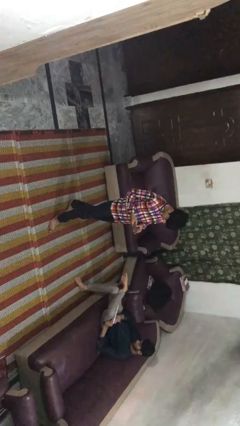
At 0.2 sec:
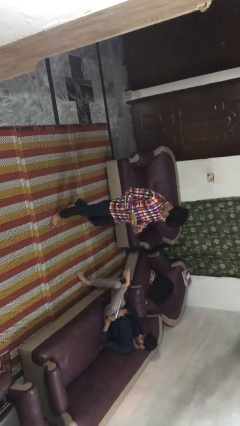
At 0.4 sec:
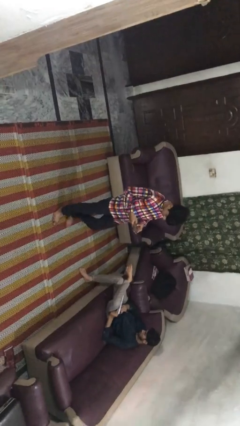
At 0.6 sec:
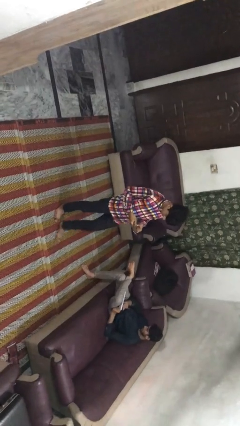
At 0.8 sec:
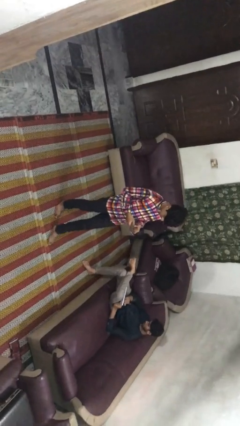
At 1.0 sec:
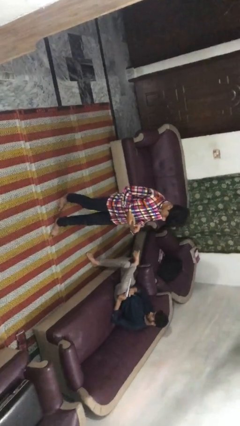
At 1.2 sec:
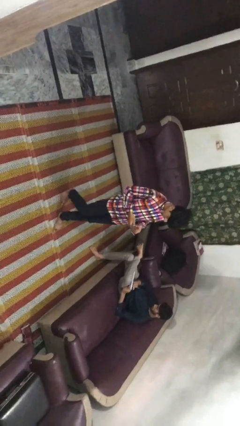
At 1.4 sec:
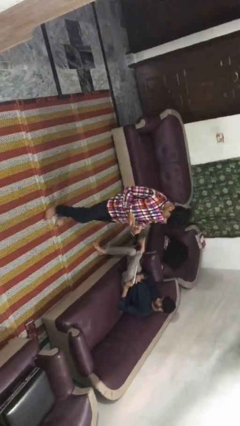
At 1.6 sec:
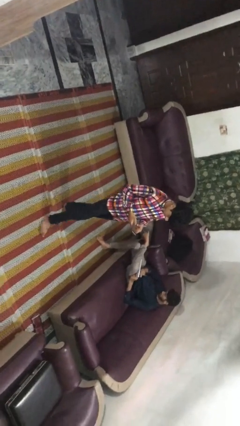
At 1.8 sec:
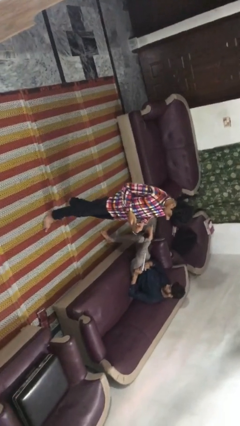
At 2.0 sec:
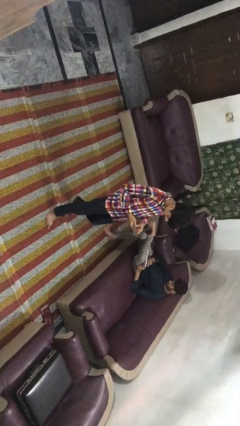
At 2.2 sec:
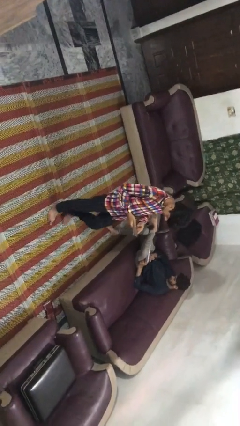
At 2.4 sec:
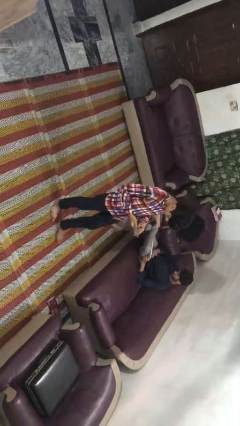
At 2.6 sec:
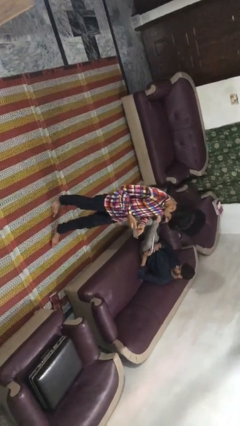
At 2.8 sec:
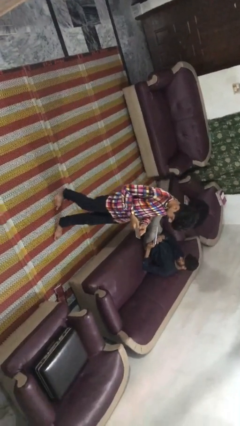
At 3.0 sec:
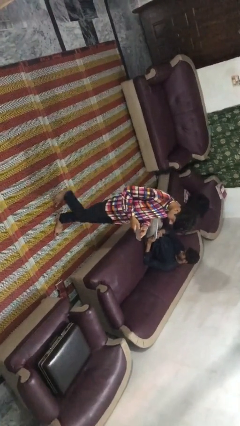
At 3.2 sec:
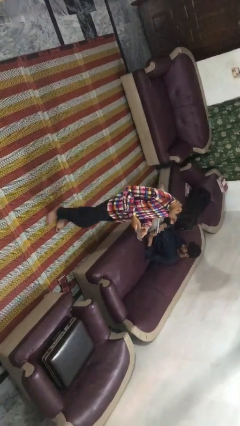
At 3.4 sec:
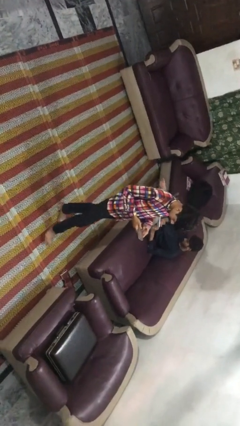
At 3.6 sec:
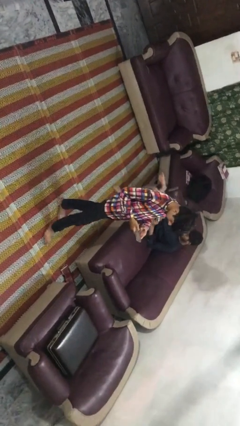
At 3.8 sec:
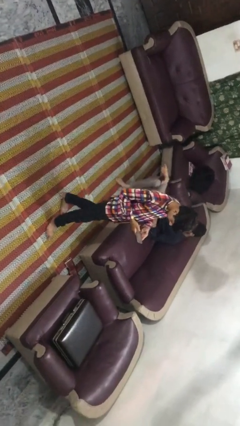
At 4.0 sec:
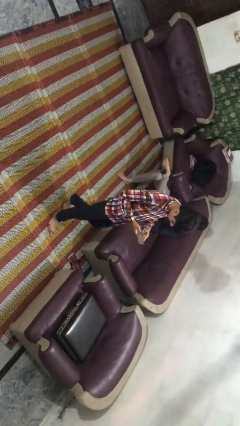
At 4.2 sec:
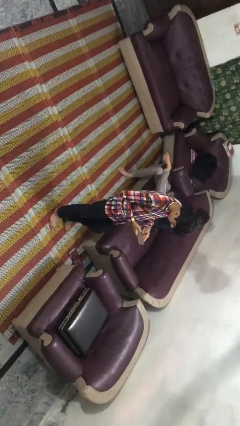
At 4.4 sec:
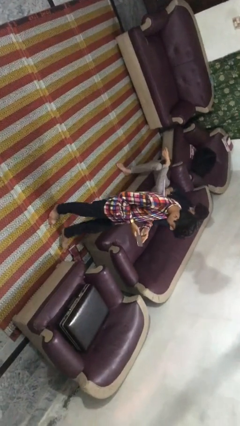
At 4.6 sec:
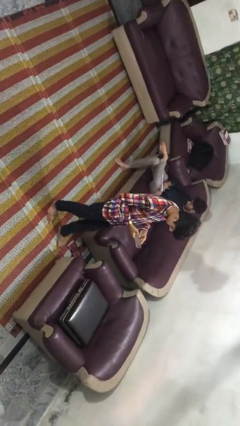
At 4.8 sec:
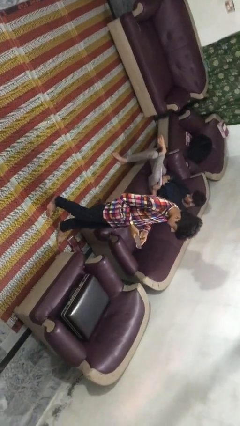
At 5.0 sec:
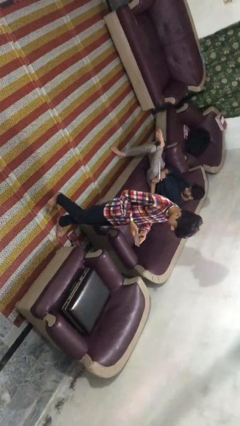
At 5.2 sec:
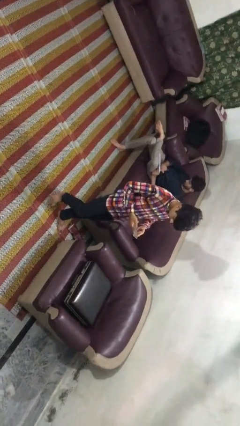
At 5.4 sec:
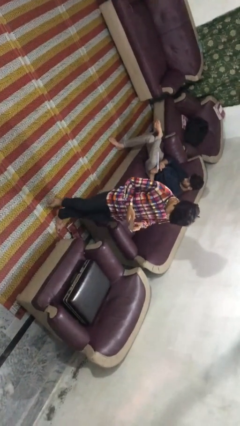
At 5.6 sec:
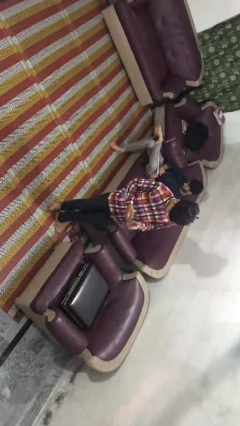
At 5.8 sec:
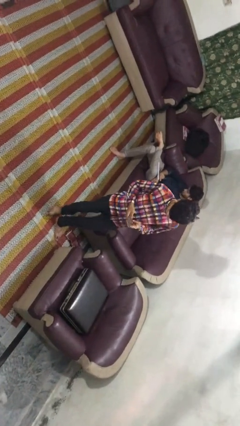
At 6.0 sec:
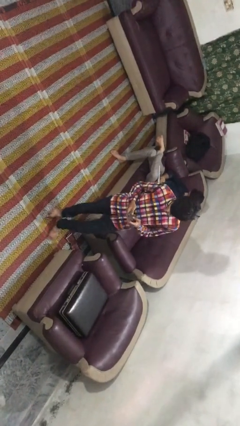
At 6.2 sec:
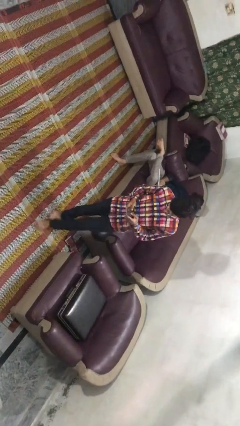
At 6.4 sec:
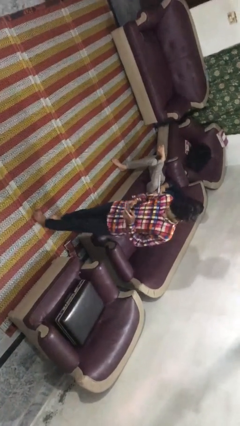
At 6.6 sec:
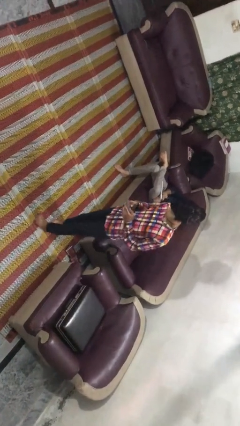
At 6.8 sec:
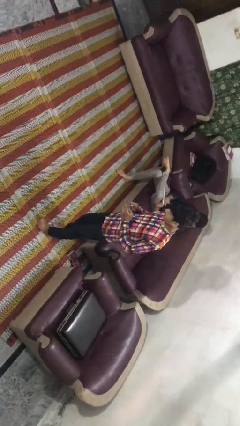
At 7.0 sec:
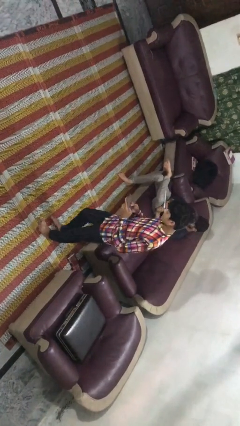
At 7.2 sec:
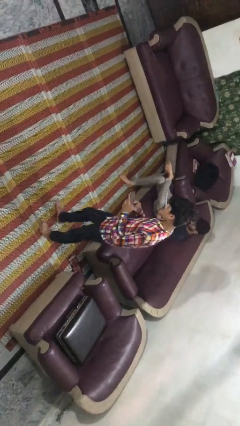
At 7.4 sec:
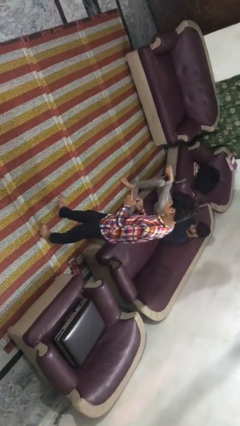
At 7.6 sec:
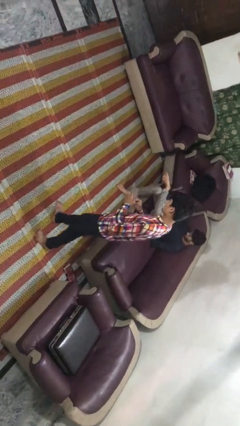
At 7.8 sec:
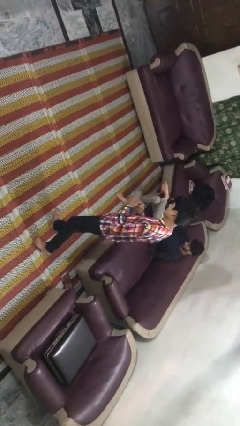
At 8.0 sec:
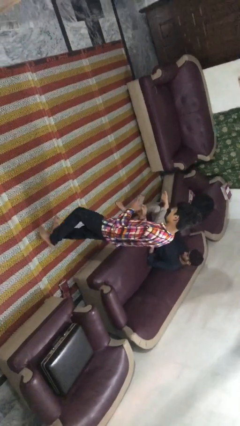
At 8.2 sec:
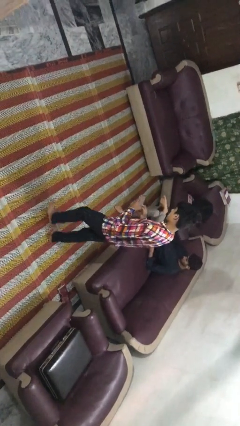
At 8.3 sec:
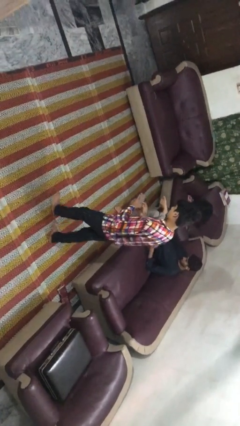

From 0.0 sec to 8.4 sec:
person texts on phone

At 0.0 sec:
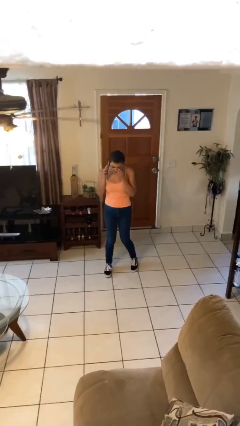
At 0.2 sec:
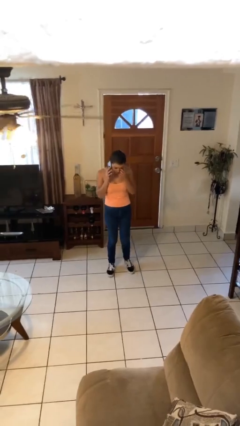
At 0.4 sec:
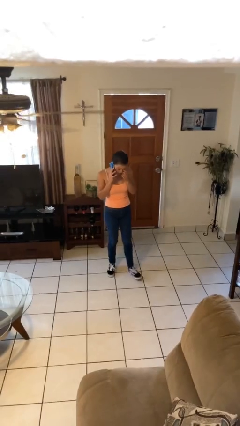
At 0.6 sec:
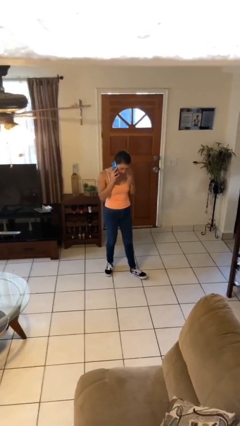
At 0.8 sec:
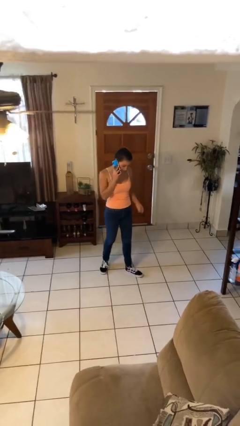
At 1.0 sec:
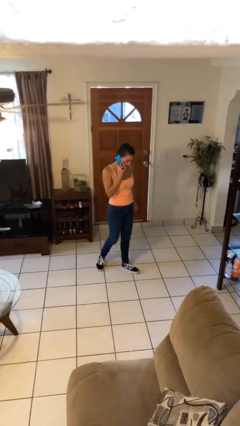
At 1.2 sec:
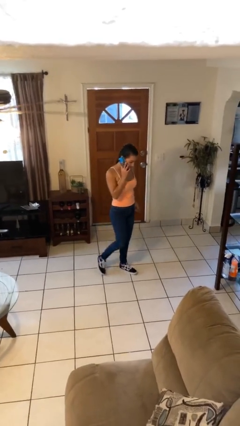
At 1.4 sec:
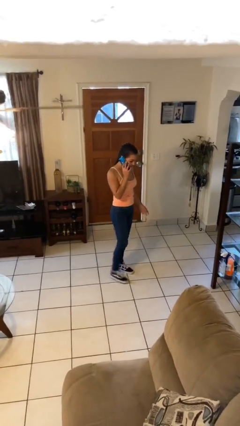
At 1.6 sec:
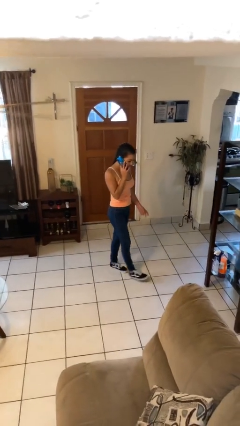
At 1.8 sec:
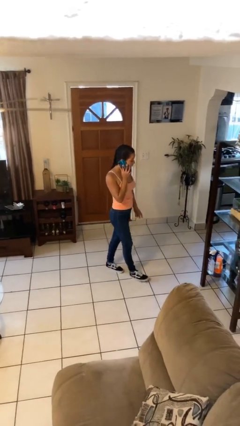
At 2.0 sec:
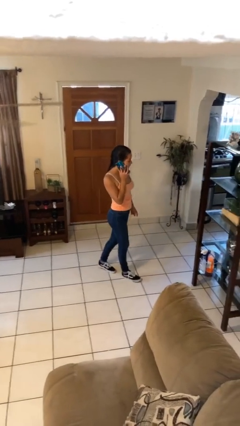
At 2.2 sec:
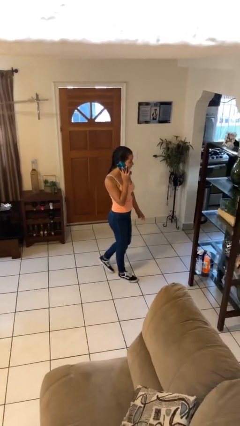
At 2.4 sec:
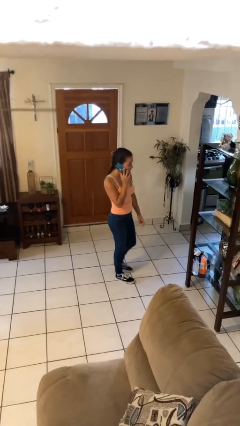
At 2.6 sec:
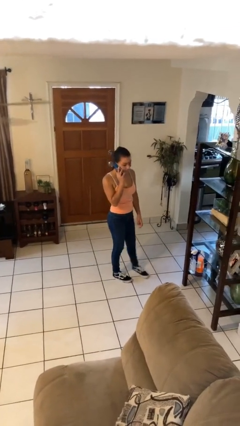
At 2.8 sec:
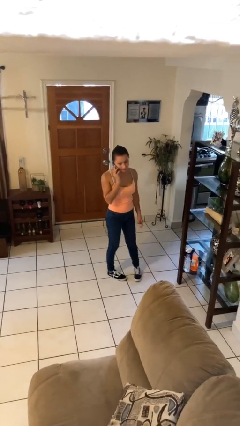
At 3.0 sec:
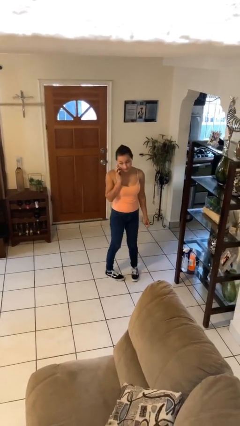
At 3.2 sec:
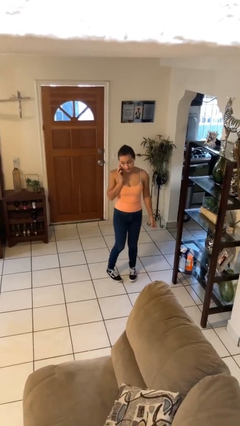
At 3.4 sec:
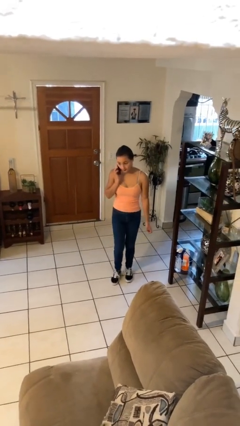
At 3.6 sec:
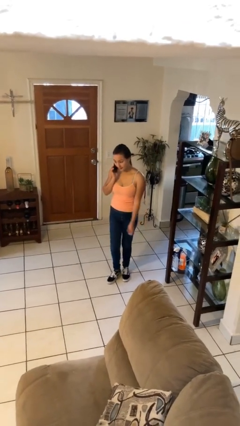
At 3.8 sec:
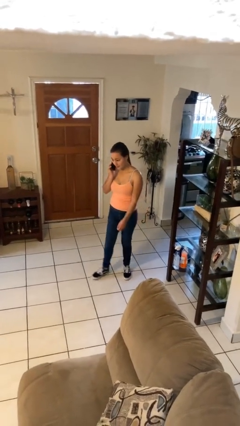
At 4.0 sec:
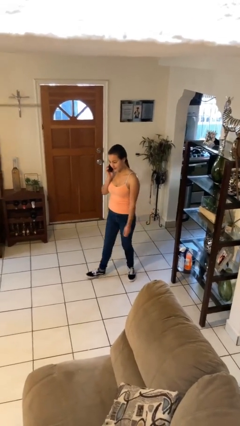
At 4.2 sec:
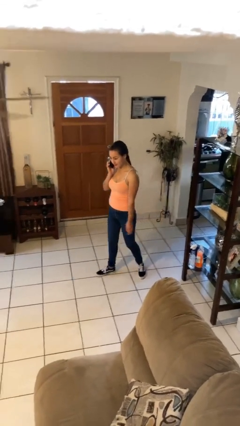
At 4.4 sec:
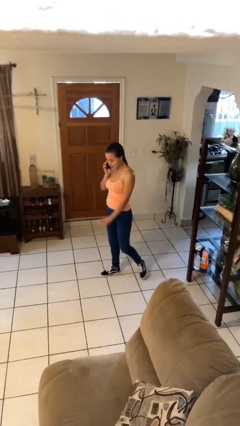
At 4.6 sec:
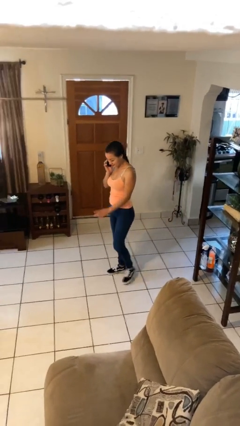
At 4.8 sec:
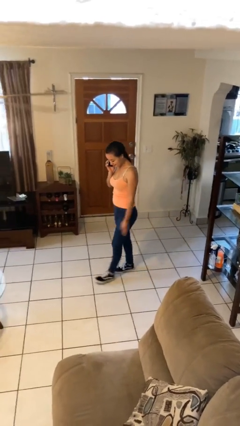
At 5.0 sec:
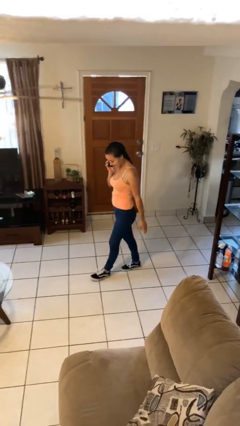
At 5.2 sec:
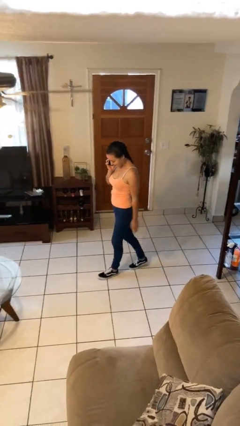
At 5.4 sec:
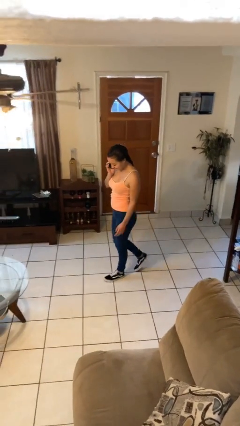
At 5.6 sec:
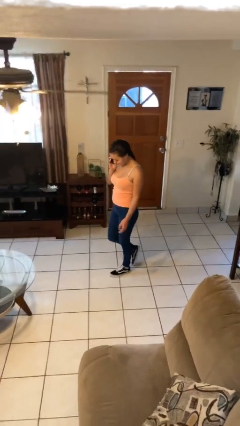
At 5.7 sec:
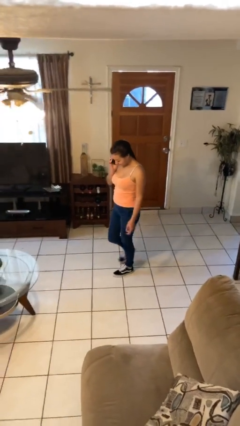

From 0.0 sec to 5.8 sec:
person talks on phone

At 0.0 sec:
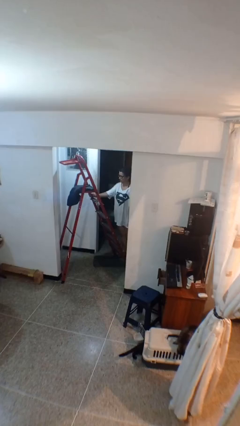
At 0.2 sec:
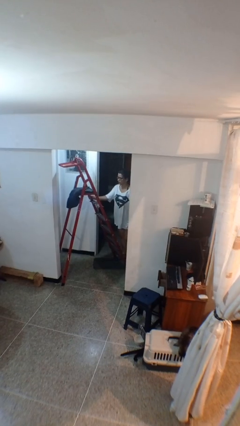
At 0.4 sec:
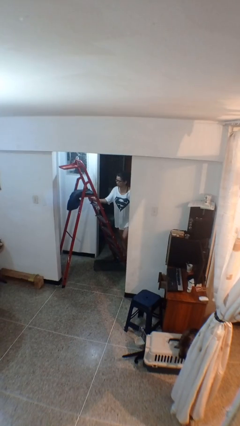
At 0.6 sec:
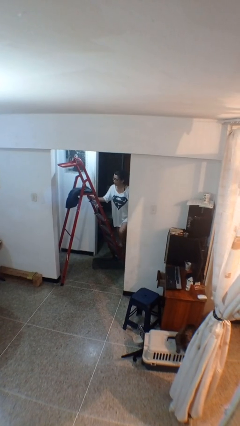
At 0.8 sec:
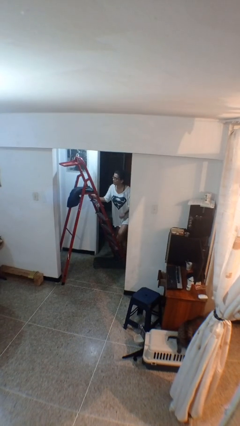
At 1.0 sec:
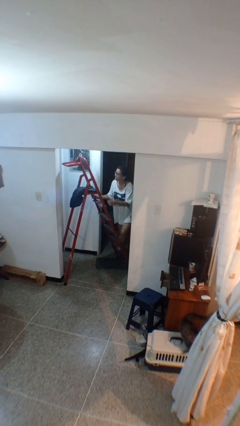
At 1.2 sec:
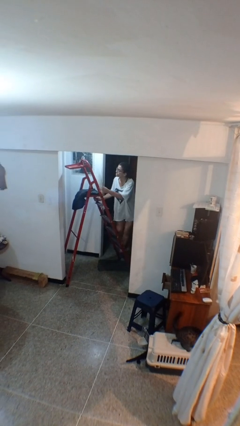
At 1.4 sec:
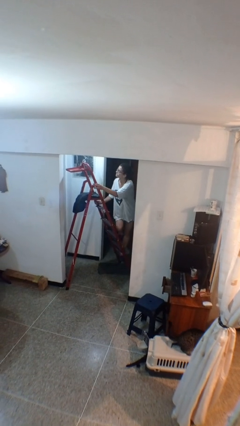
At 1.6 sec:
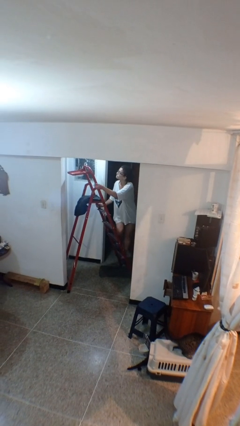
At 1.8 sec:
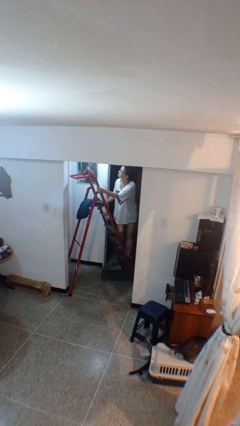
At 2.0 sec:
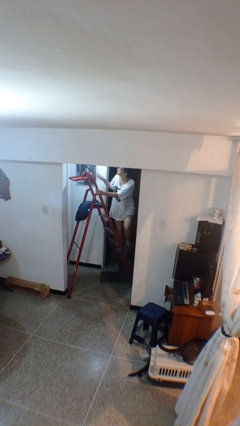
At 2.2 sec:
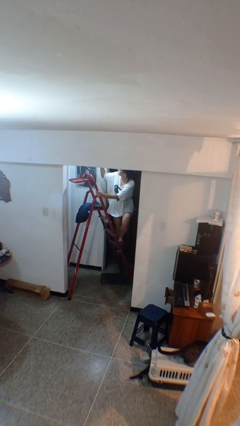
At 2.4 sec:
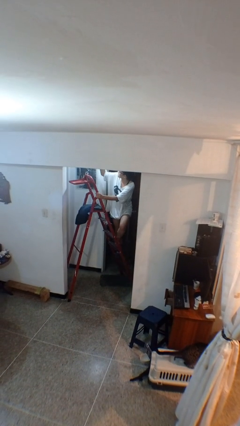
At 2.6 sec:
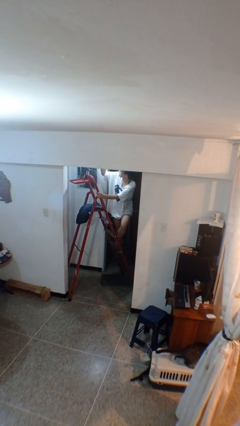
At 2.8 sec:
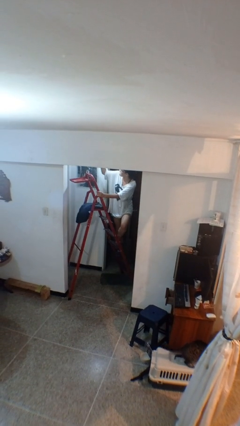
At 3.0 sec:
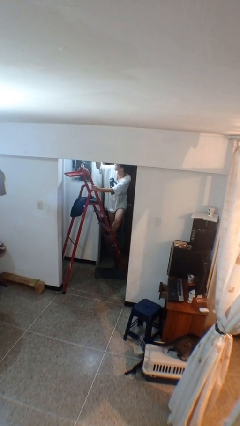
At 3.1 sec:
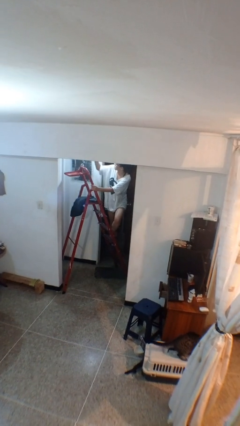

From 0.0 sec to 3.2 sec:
person climbs up ladder

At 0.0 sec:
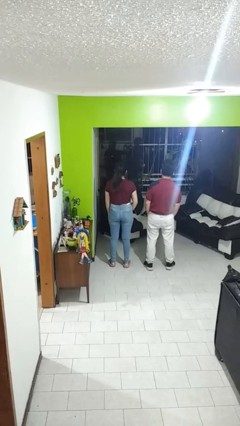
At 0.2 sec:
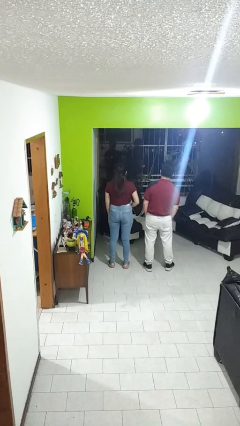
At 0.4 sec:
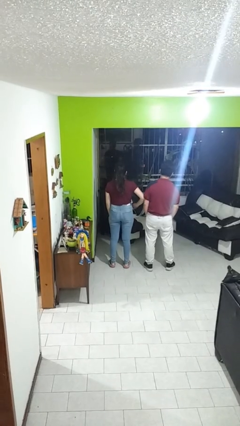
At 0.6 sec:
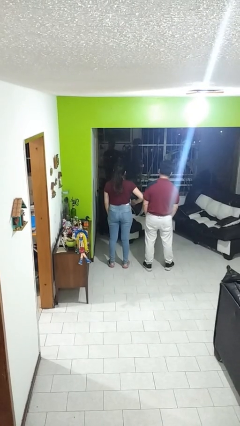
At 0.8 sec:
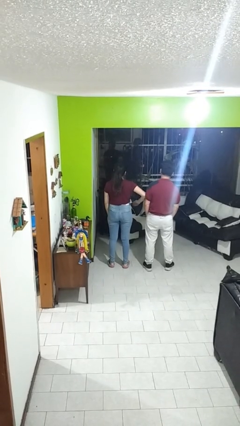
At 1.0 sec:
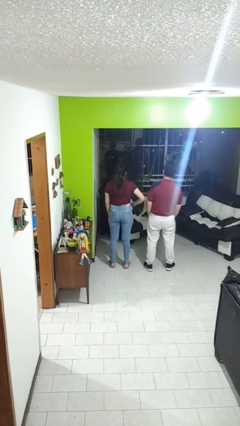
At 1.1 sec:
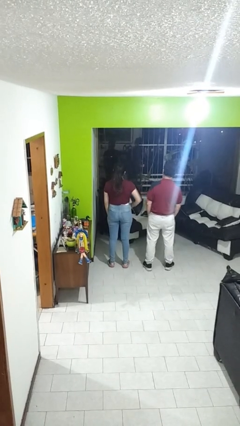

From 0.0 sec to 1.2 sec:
person nudges person with elbow
